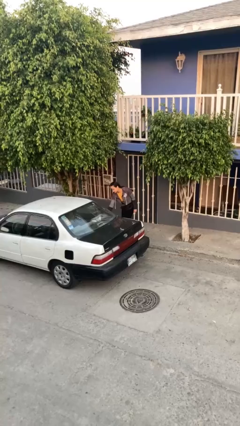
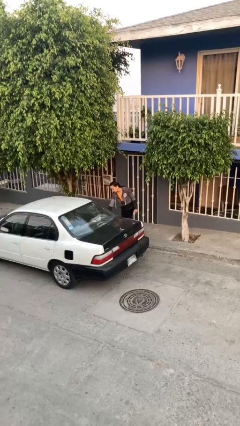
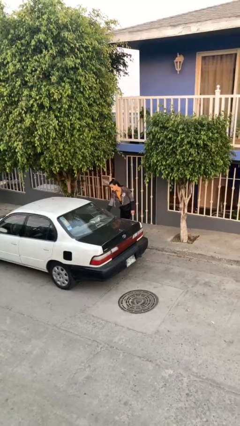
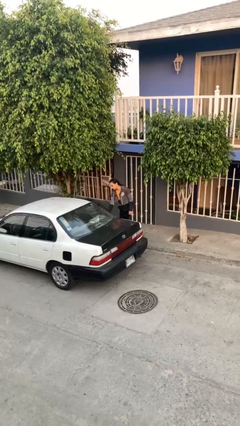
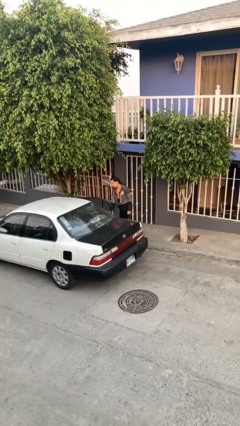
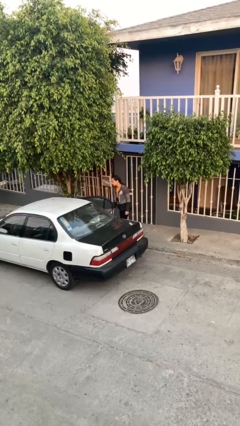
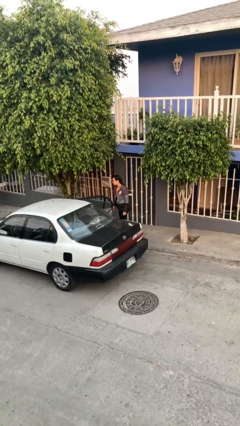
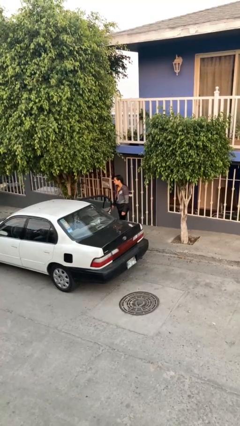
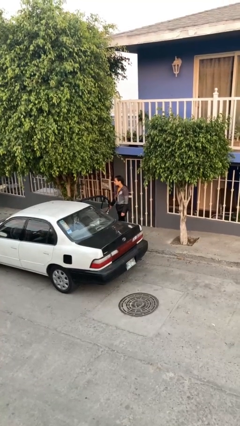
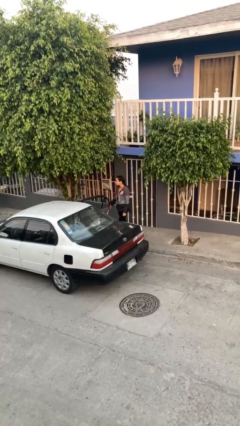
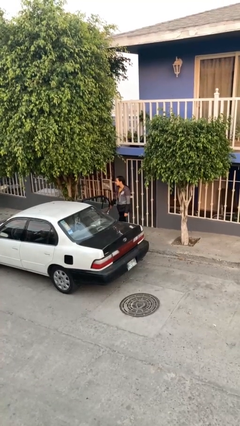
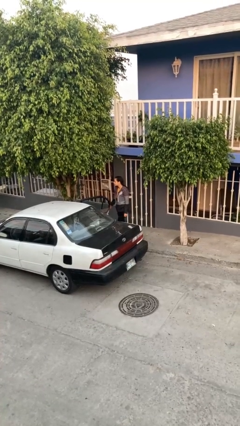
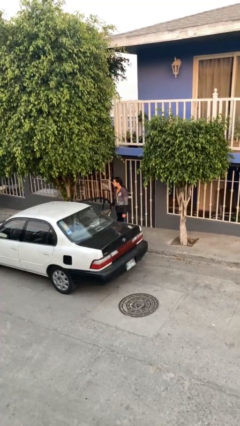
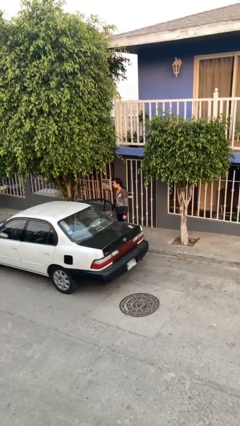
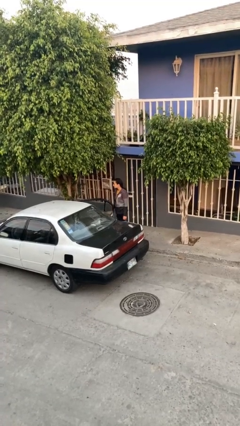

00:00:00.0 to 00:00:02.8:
person opens car door

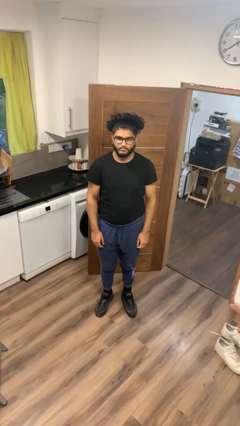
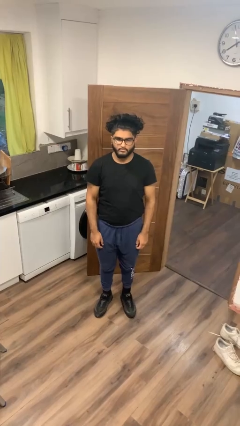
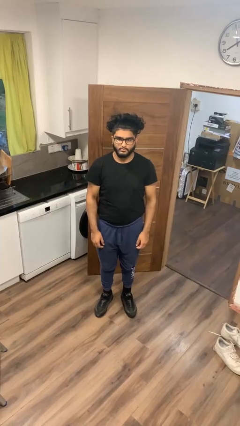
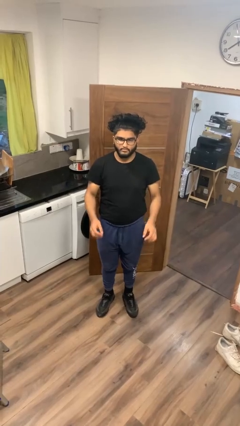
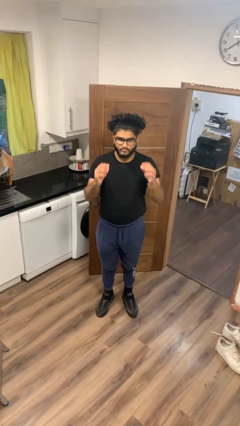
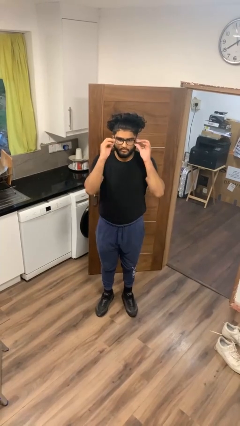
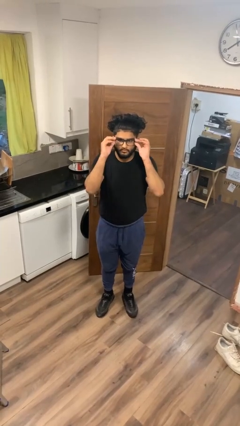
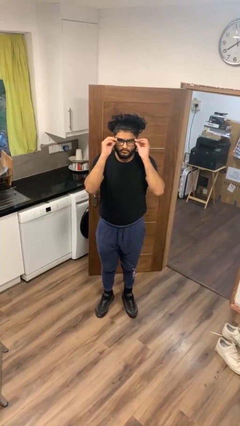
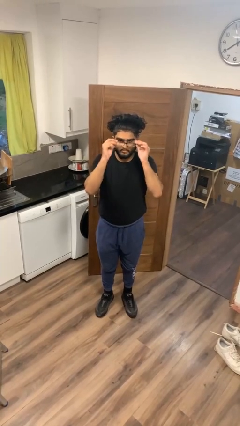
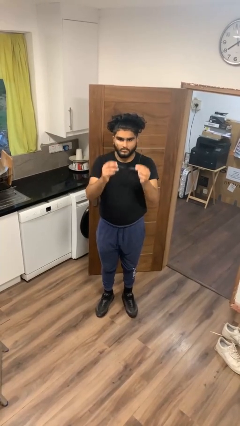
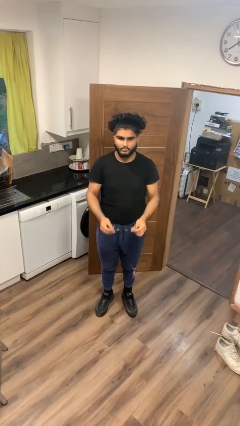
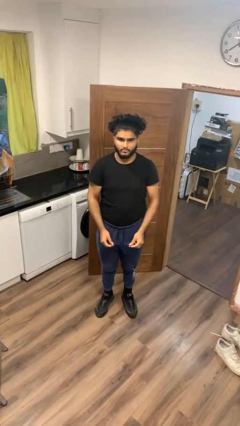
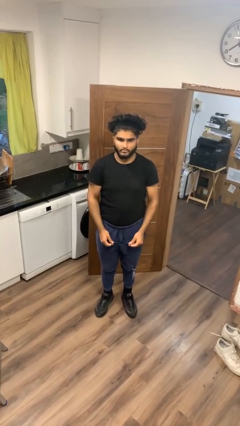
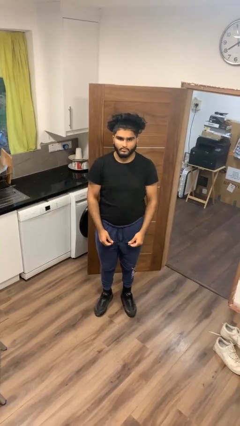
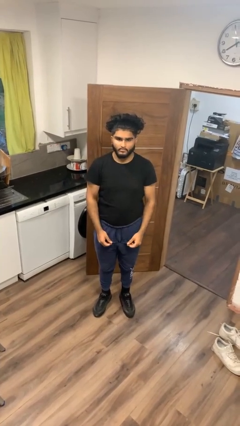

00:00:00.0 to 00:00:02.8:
person takes off glasses

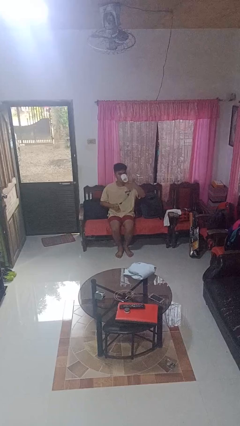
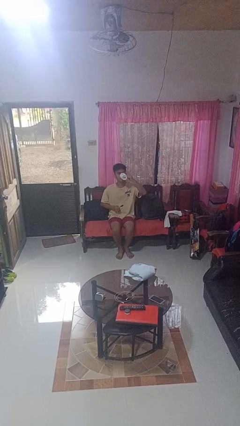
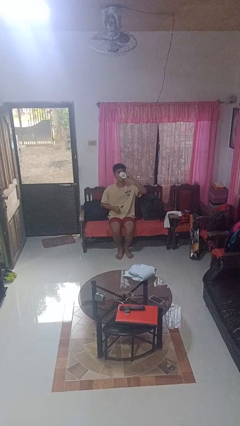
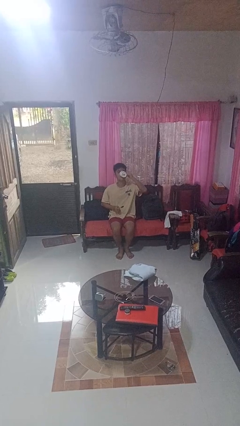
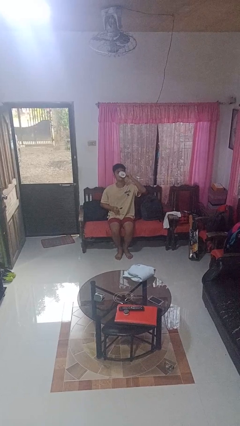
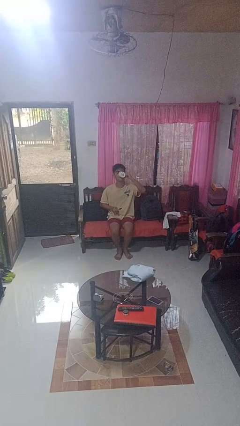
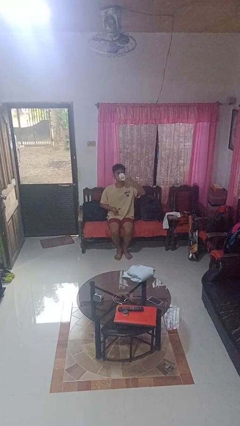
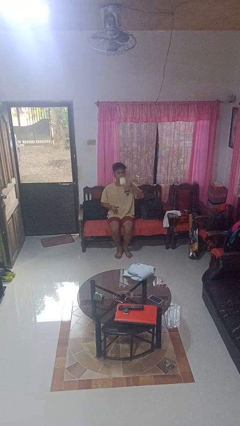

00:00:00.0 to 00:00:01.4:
person drinks from mug

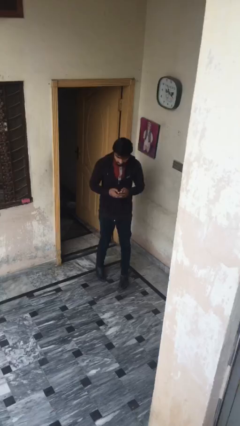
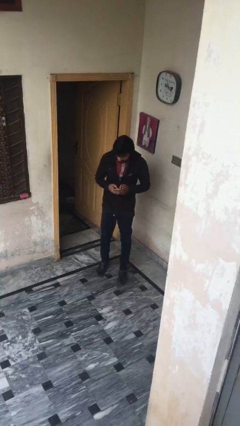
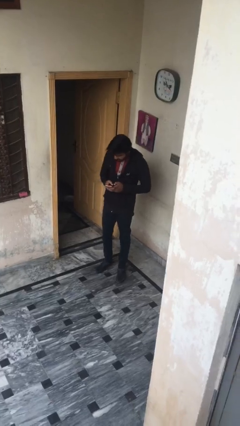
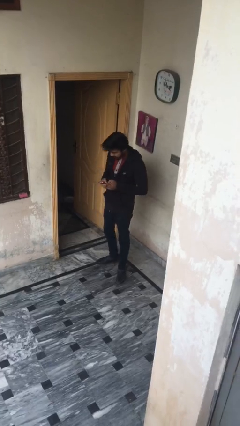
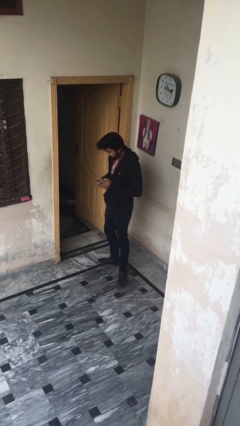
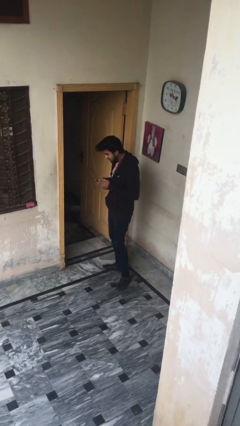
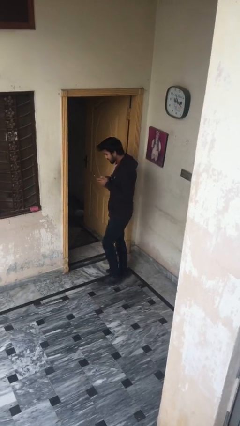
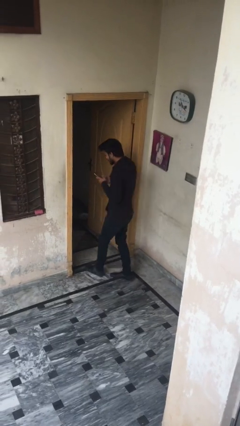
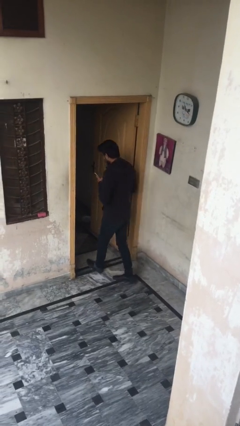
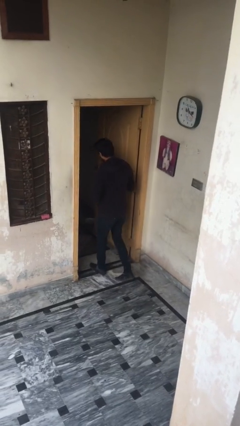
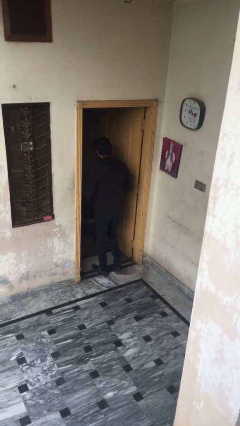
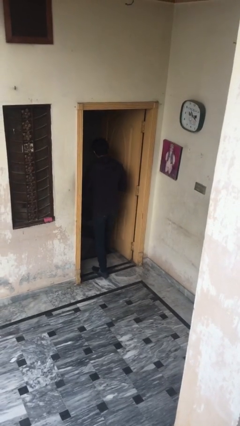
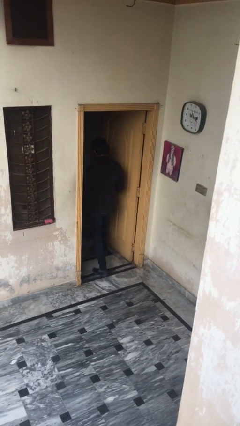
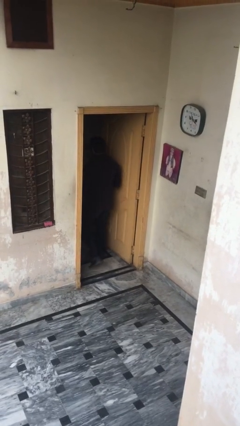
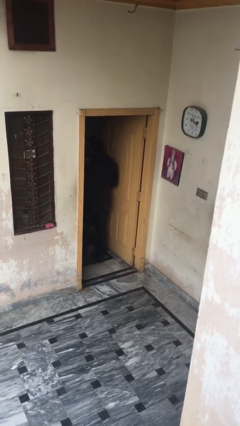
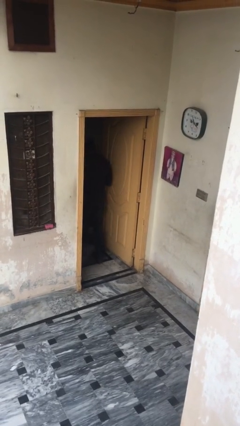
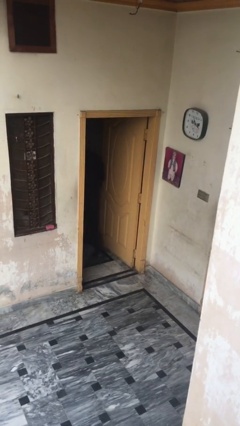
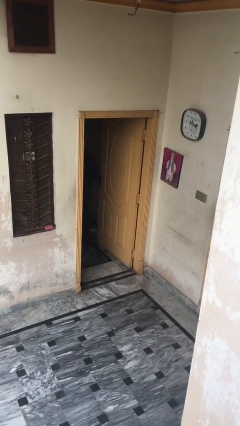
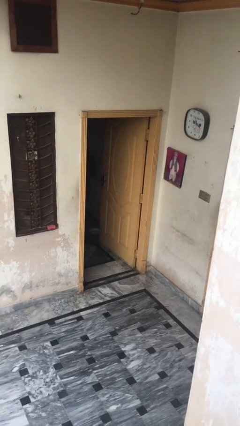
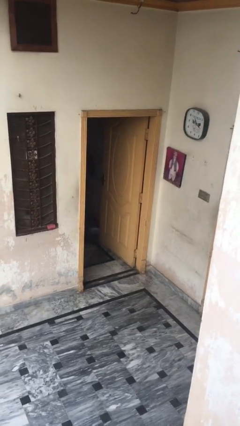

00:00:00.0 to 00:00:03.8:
person exits scene through structure

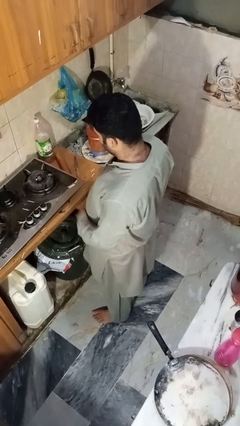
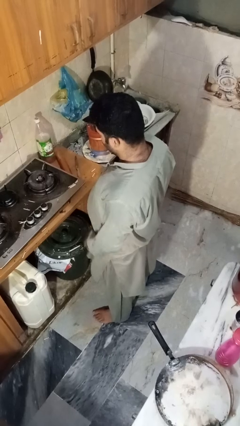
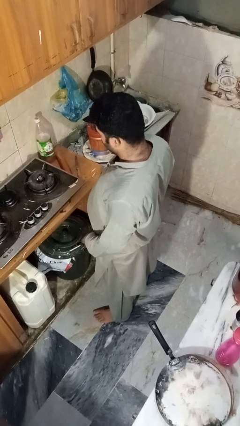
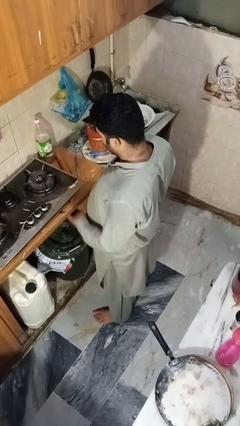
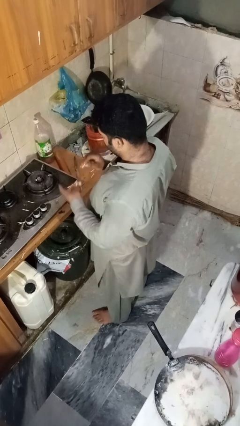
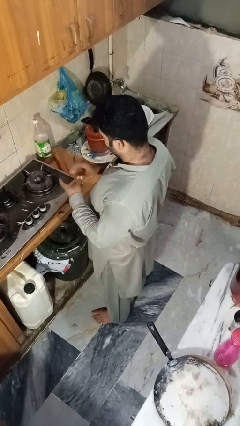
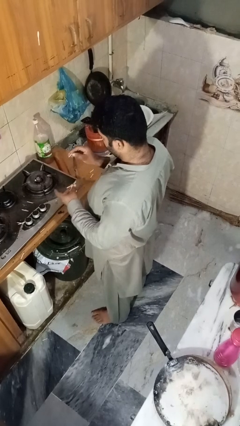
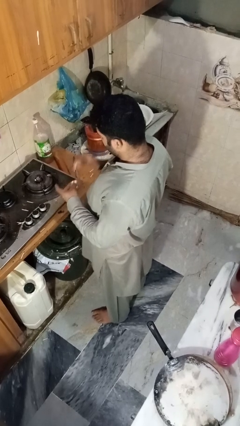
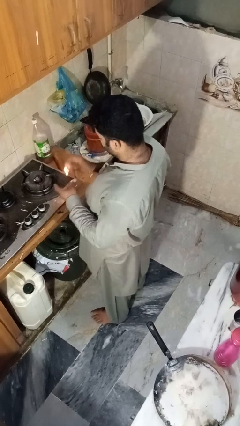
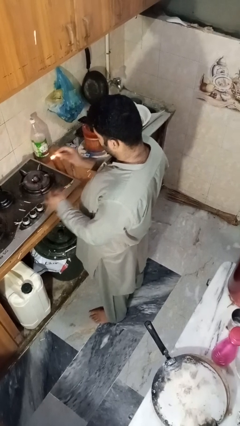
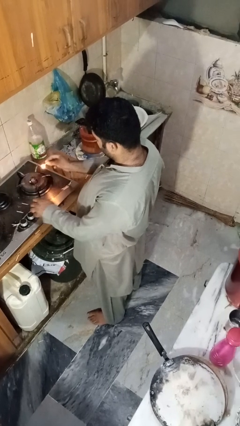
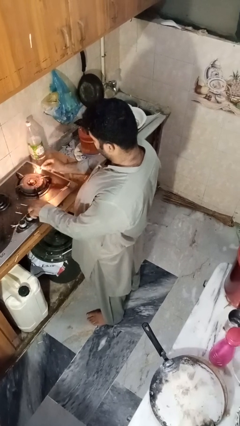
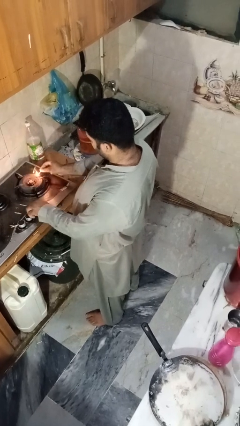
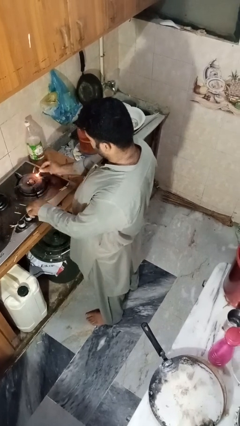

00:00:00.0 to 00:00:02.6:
person turns on stovetop

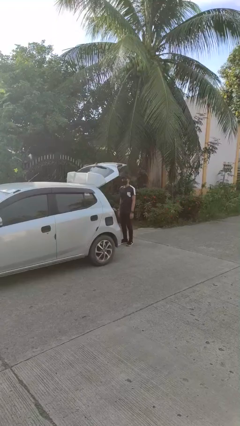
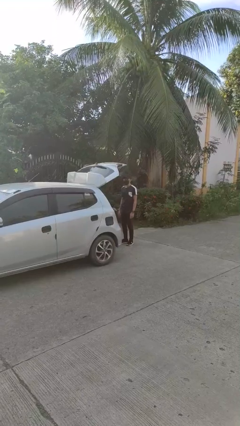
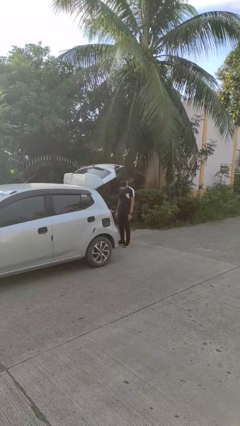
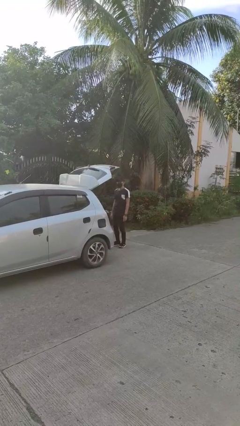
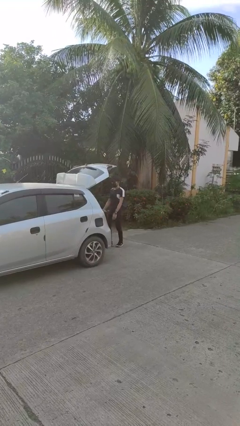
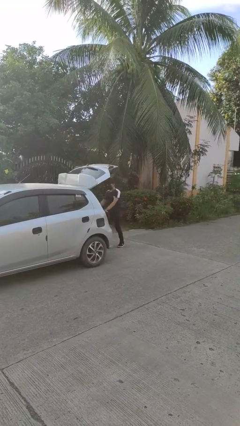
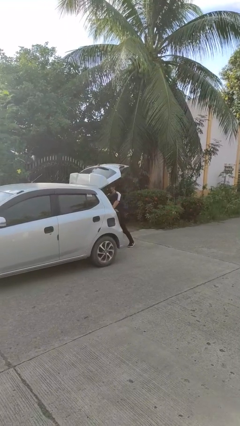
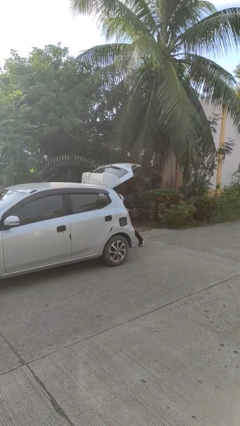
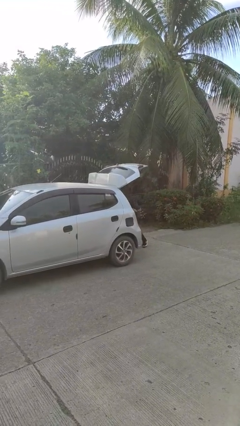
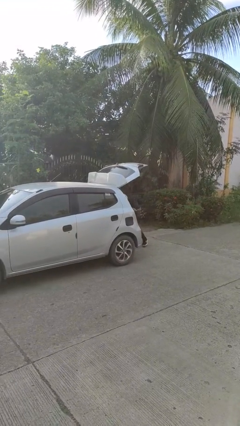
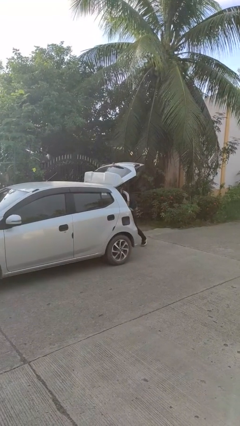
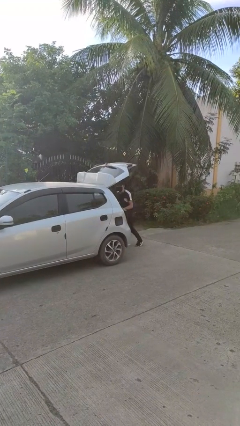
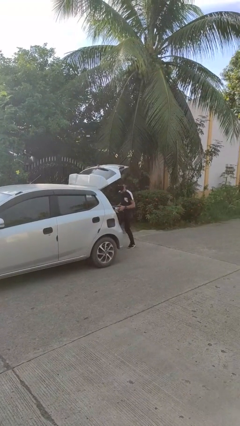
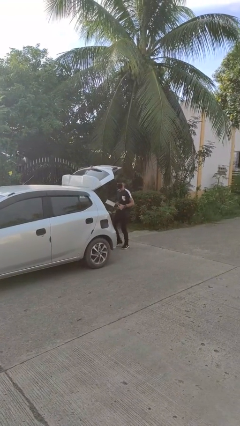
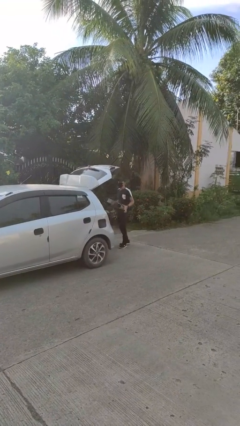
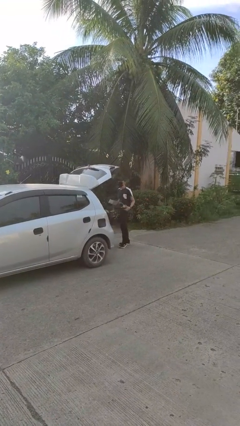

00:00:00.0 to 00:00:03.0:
person unloads car

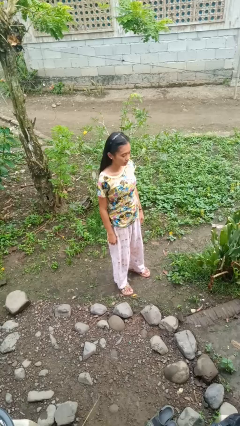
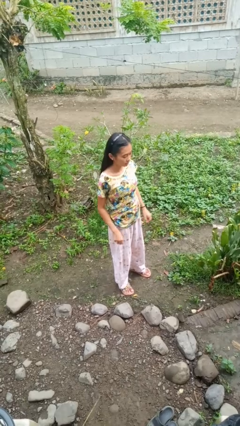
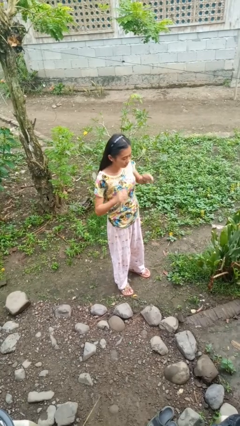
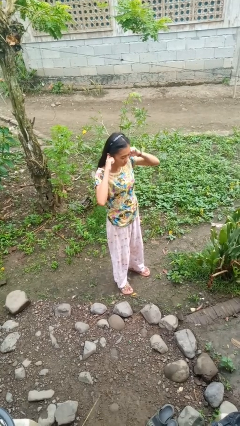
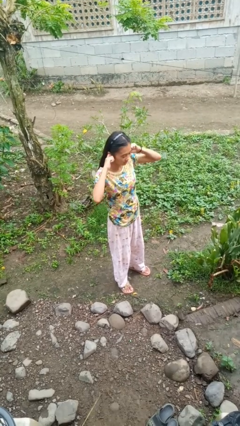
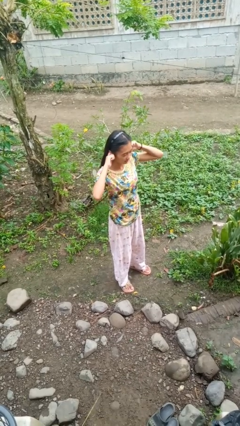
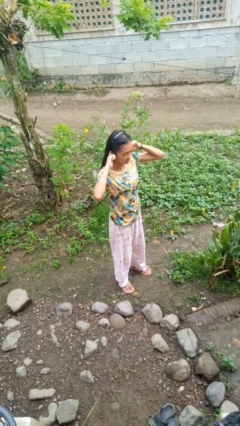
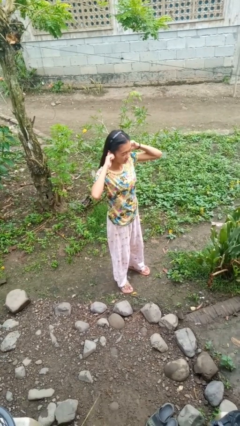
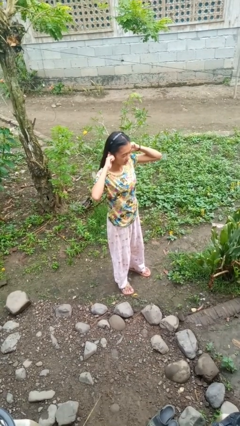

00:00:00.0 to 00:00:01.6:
person puts fingers in ear
